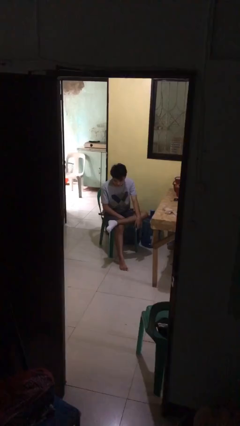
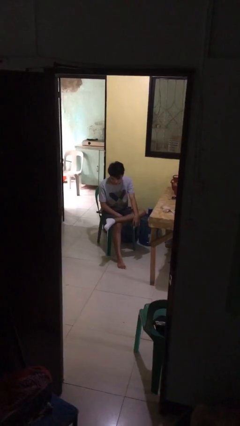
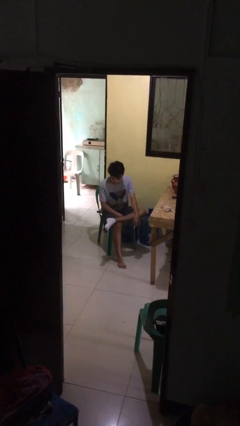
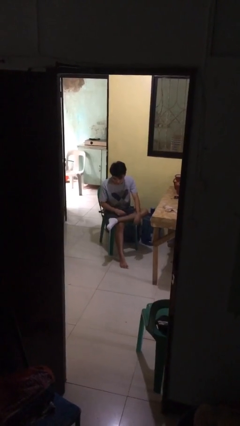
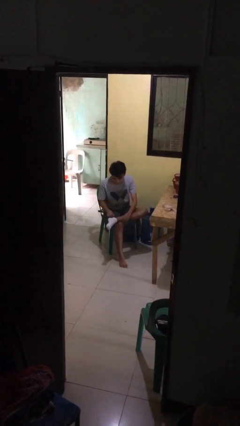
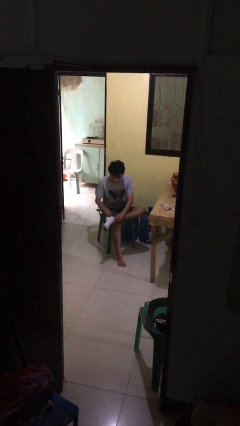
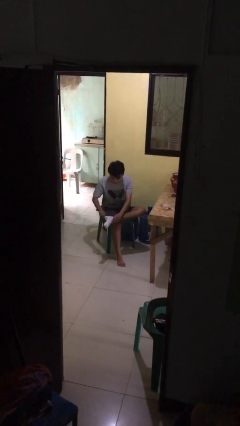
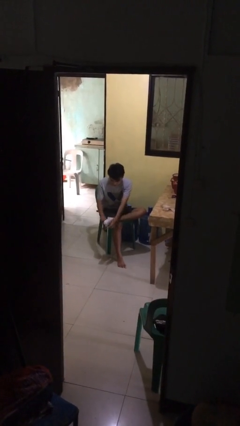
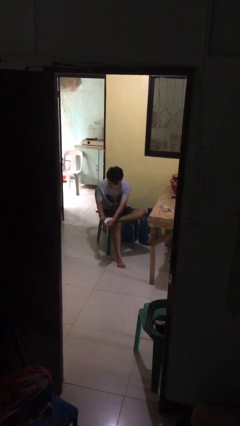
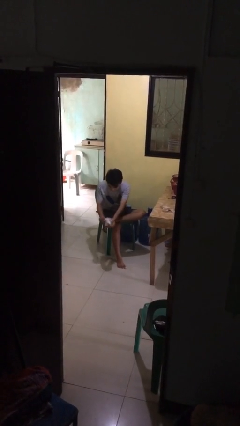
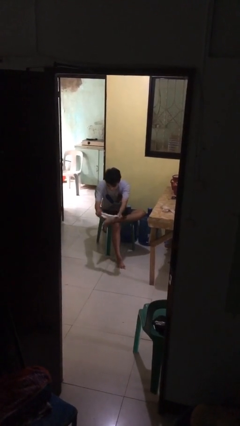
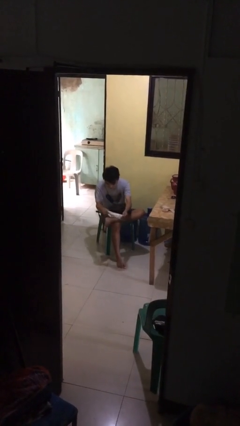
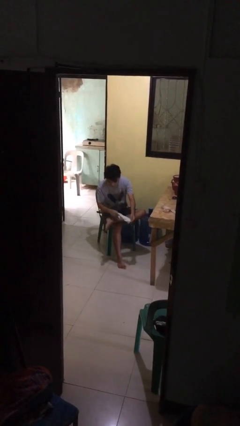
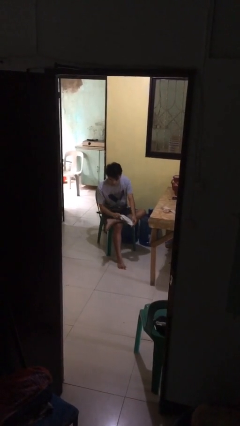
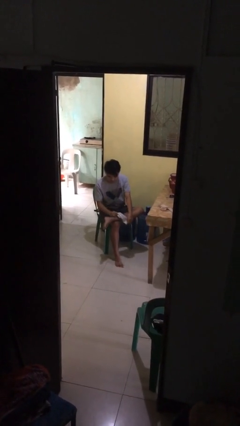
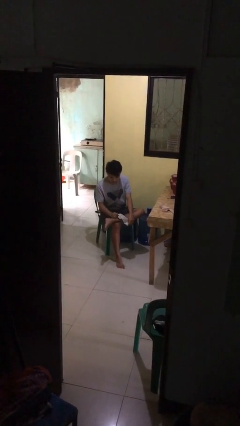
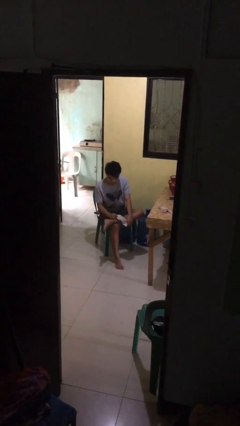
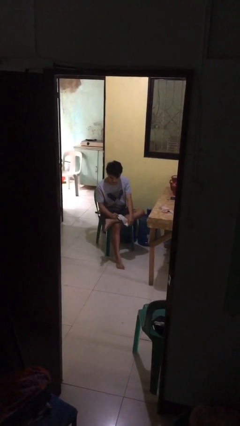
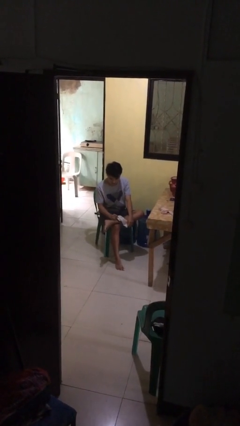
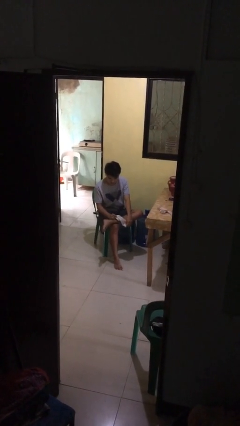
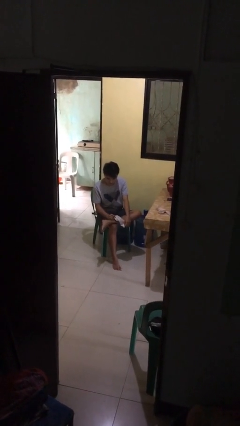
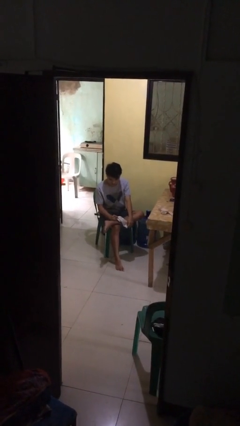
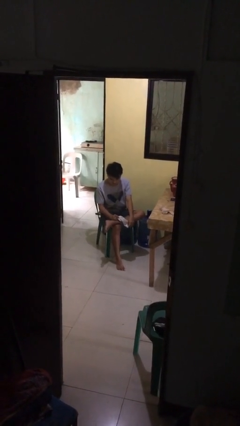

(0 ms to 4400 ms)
person takes off socks

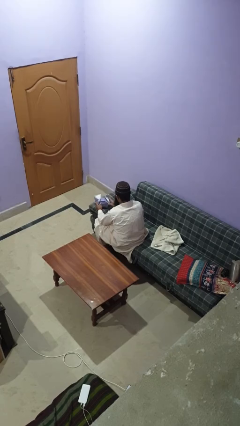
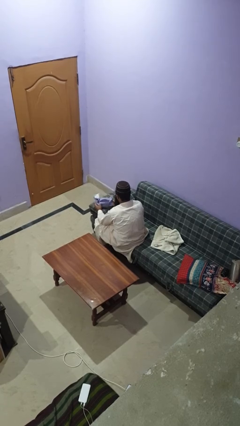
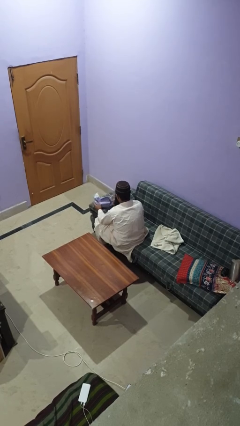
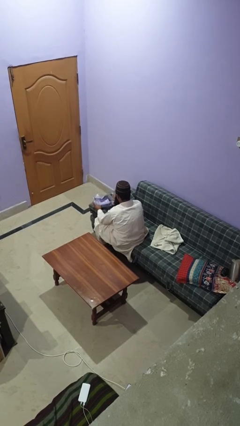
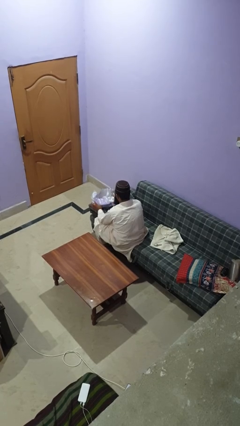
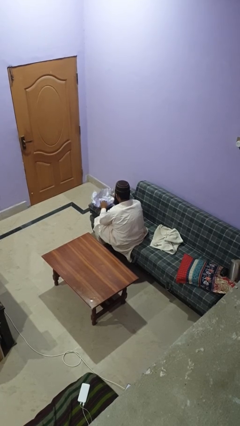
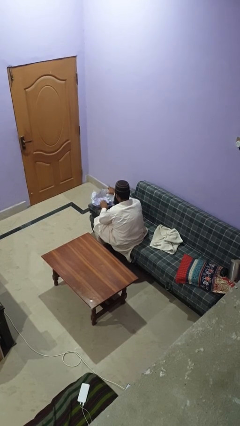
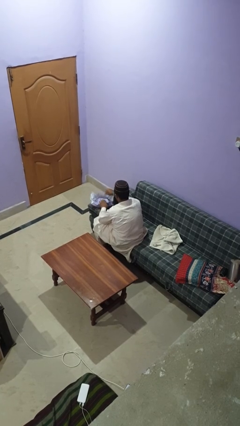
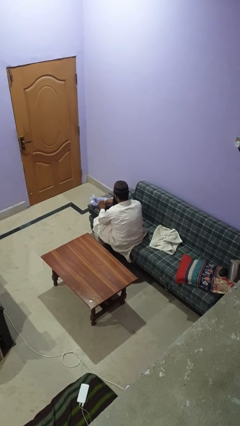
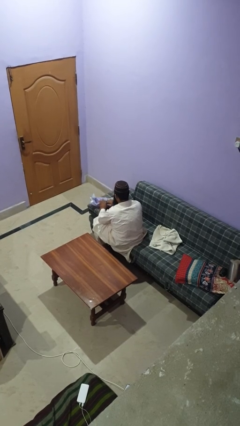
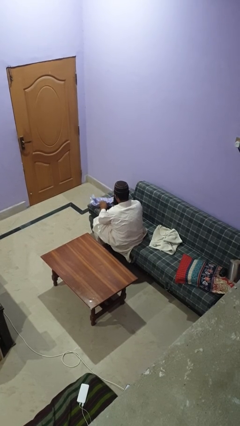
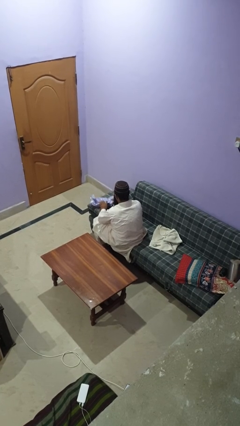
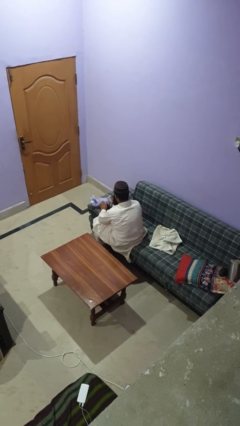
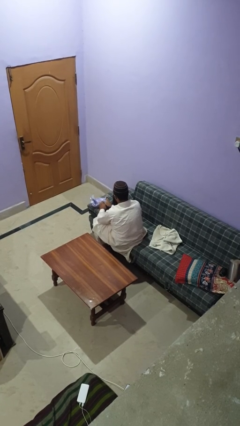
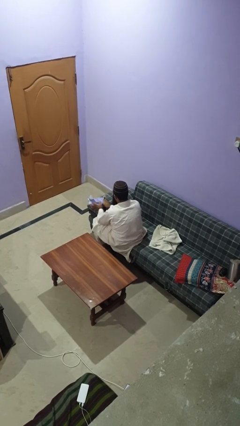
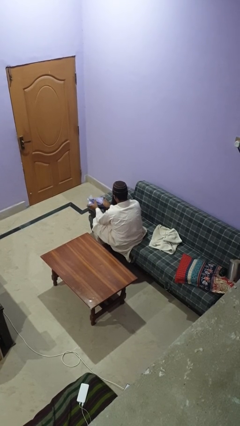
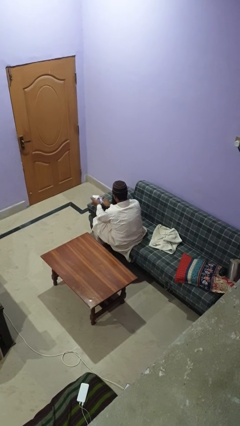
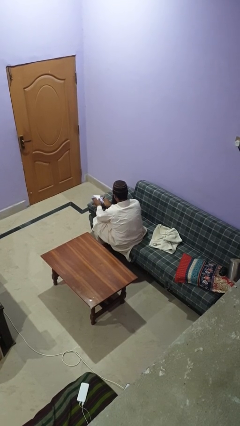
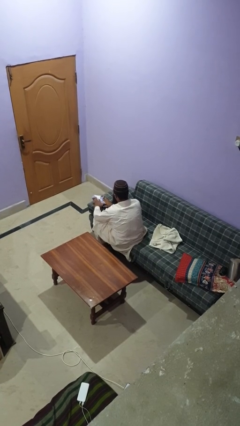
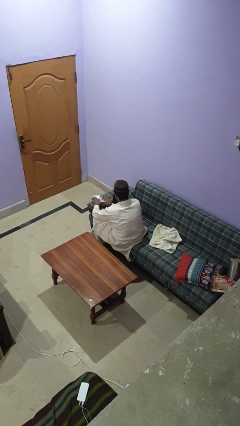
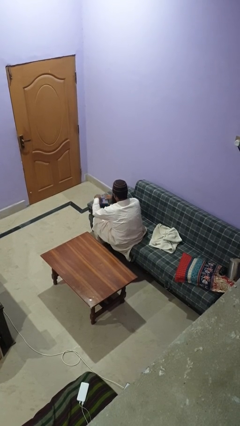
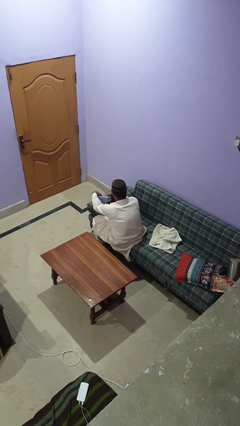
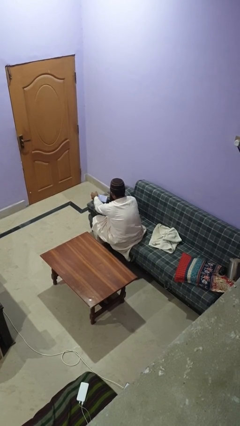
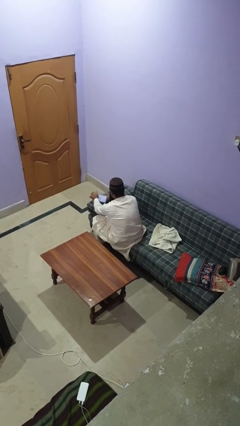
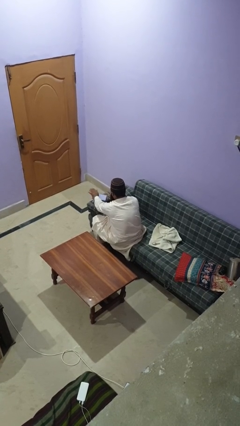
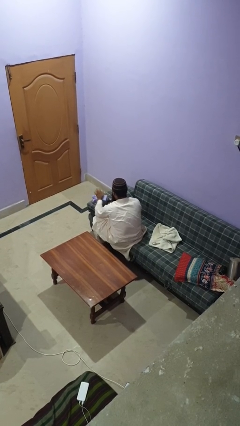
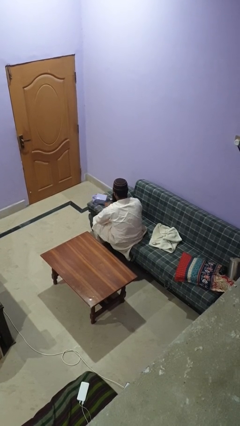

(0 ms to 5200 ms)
person wraps box

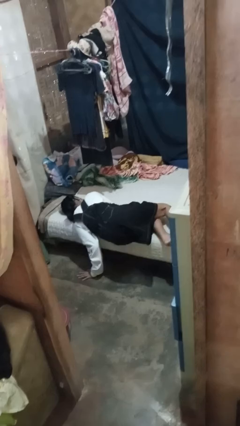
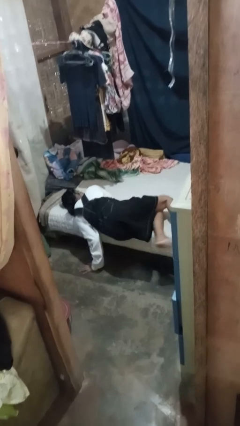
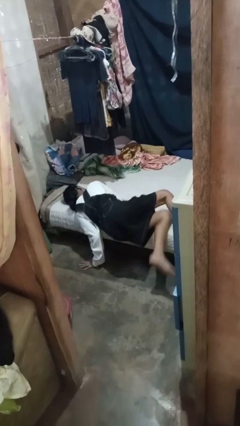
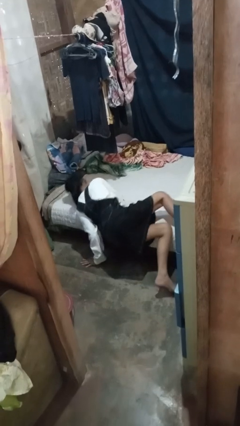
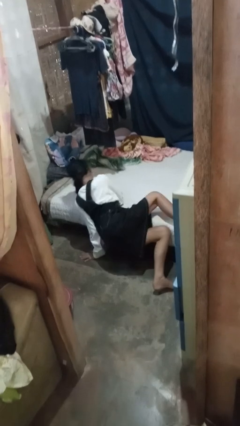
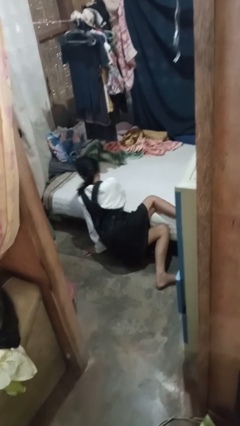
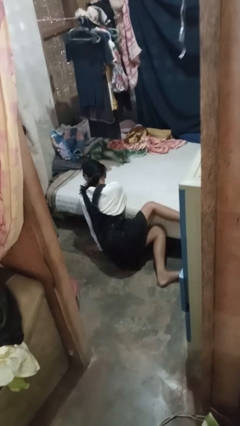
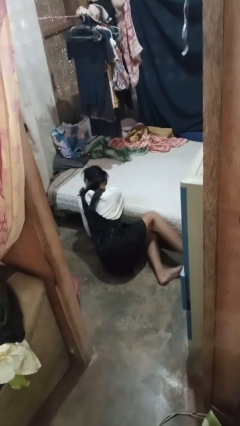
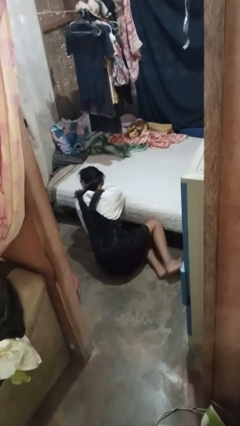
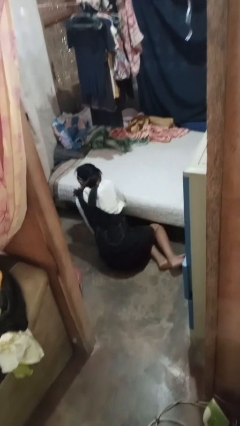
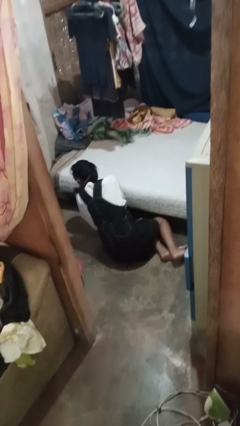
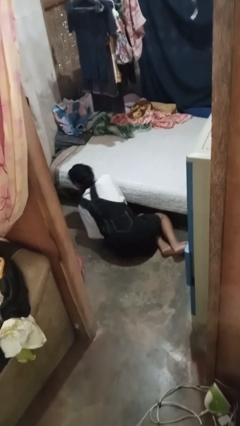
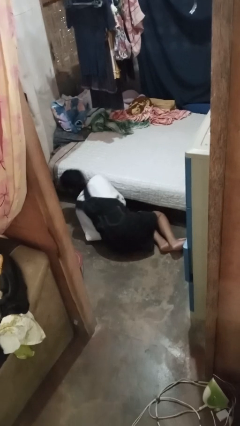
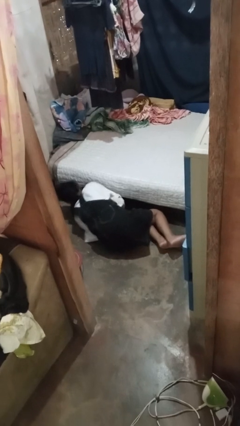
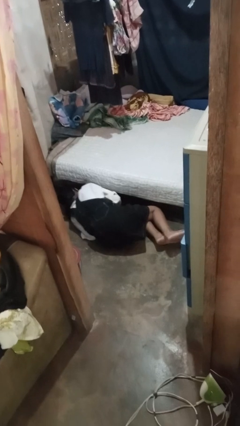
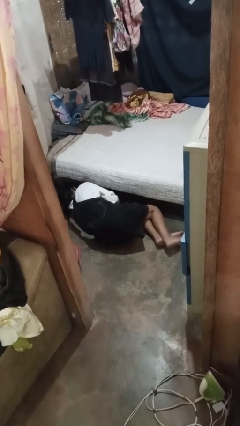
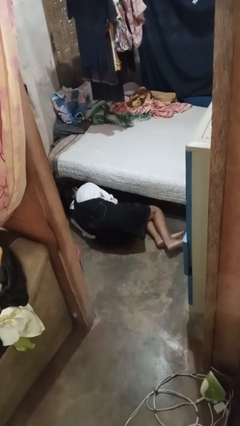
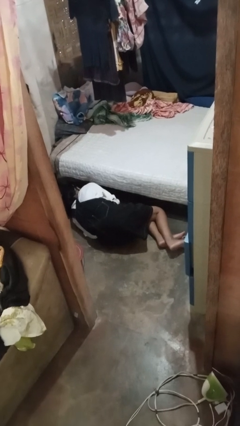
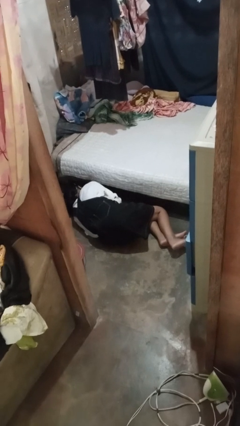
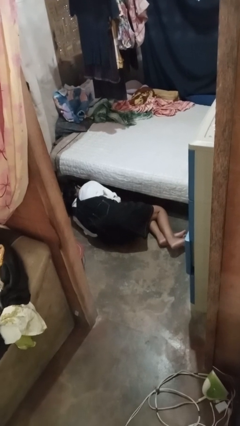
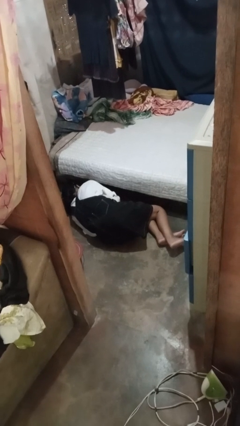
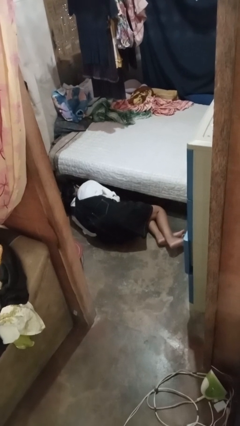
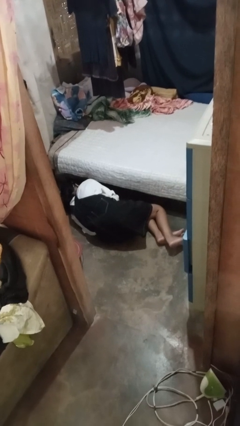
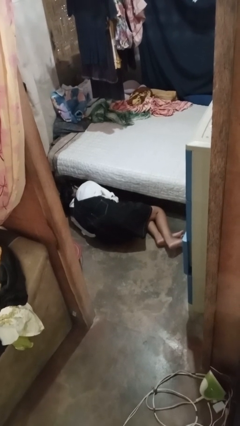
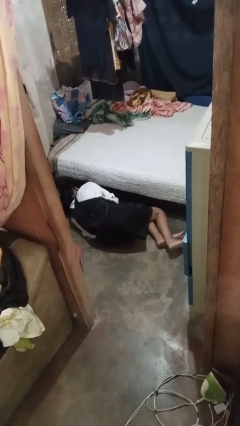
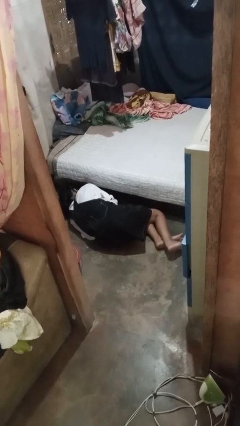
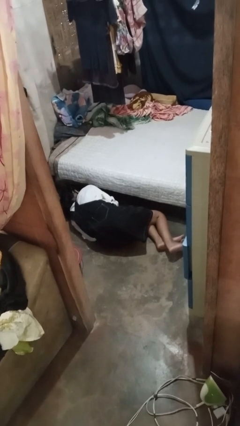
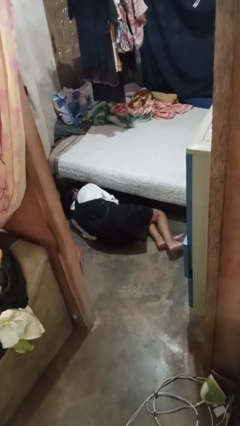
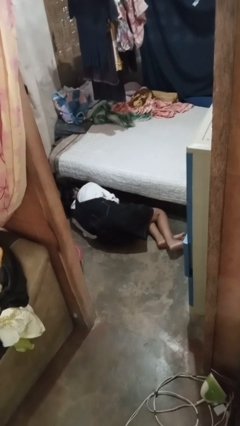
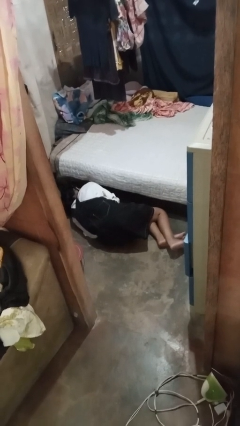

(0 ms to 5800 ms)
person falls from bed

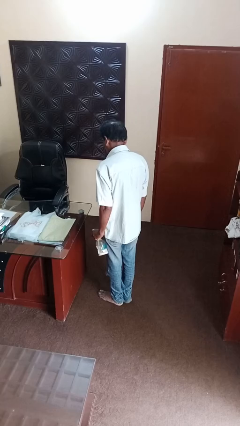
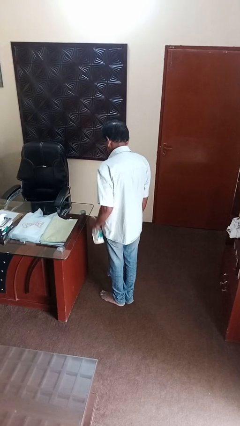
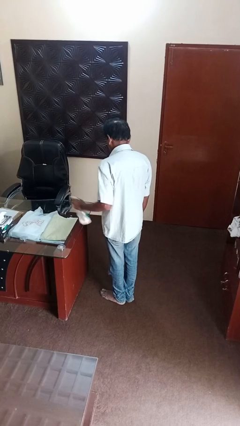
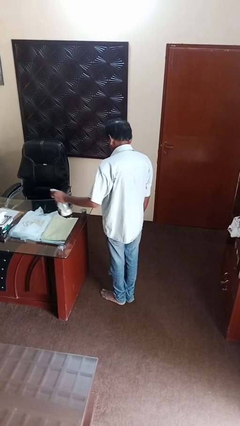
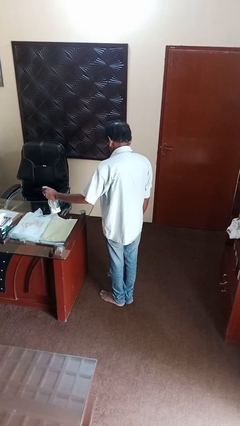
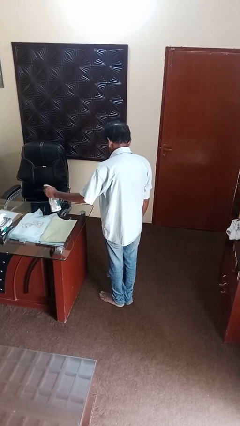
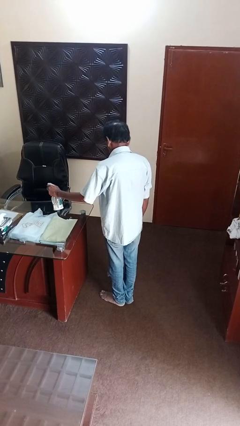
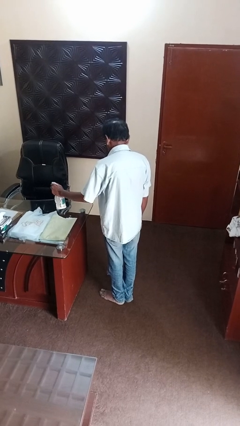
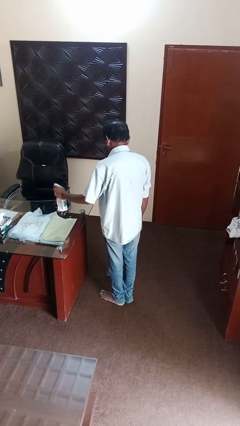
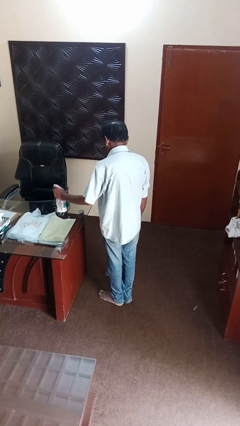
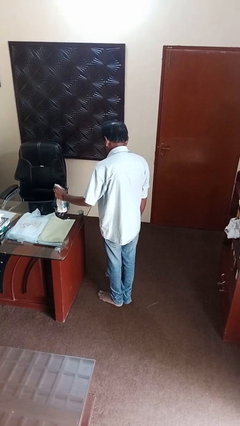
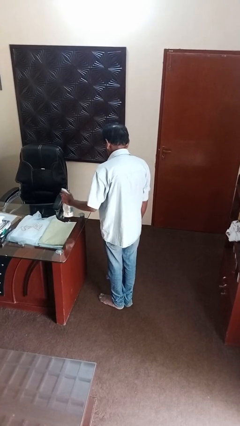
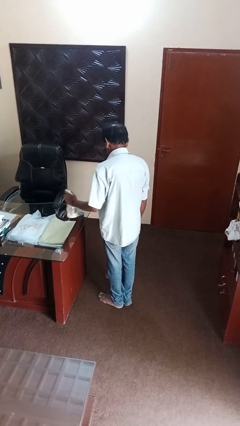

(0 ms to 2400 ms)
person sprays from bottle

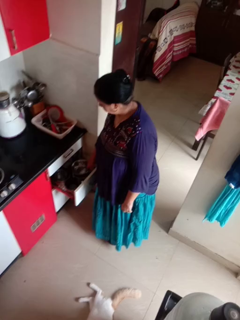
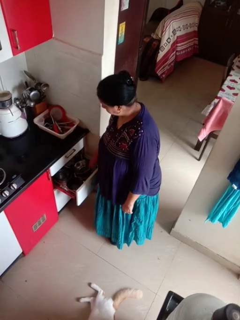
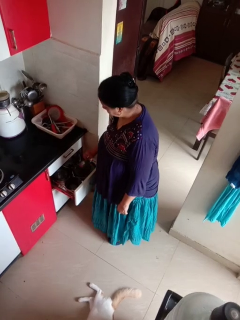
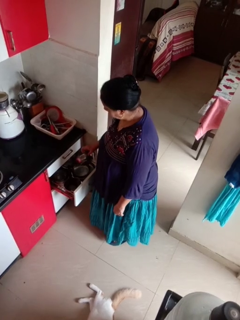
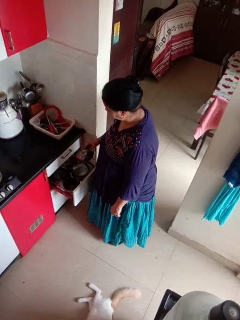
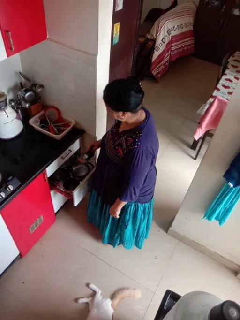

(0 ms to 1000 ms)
person takes object from kitchen drawer
